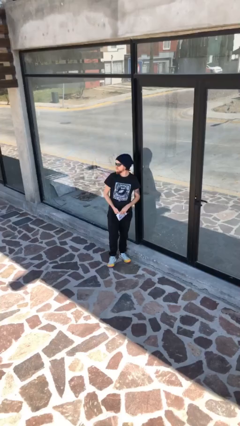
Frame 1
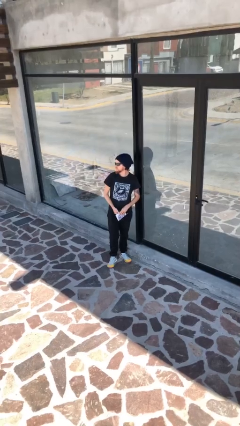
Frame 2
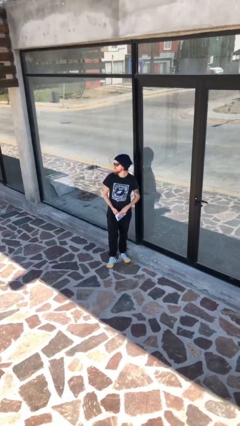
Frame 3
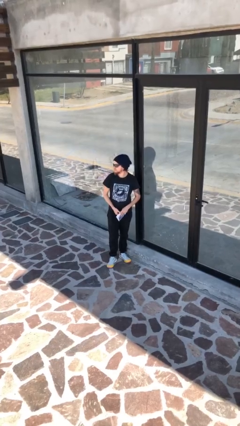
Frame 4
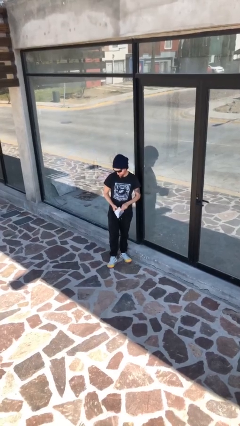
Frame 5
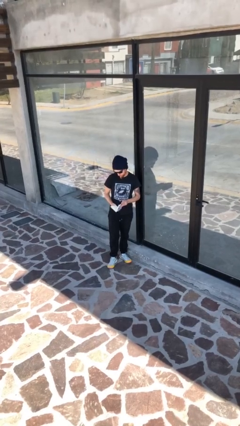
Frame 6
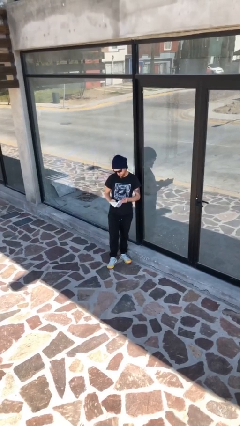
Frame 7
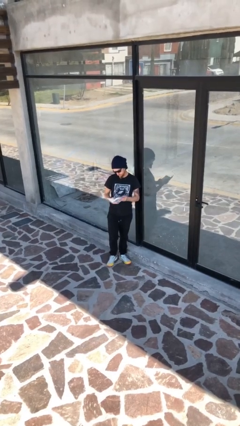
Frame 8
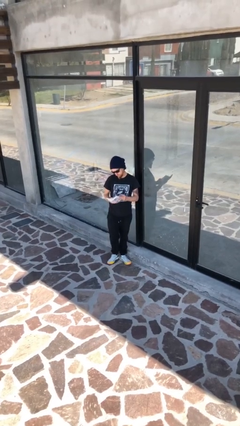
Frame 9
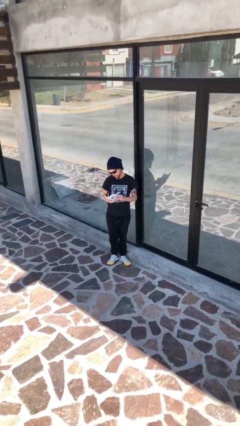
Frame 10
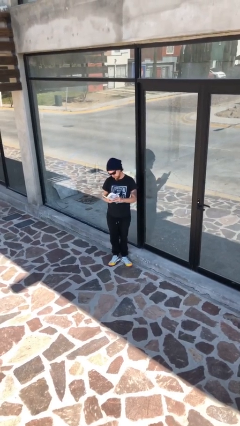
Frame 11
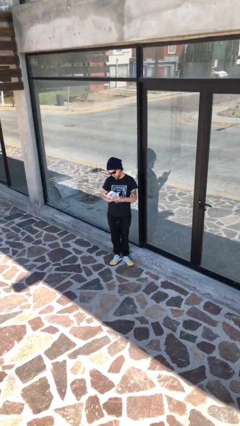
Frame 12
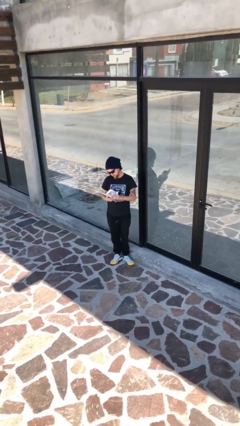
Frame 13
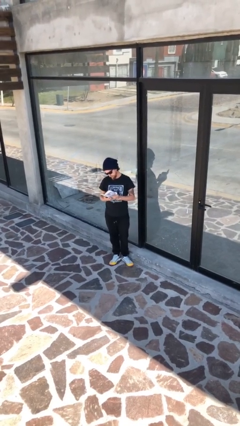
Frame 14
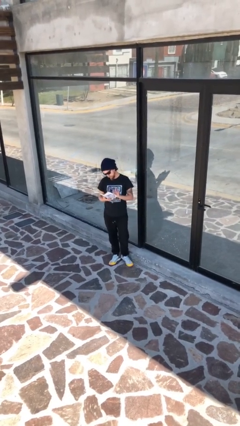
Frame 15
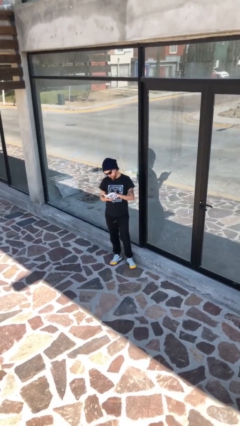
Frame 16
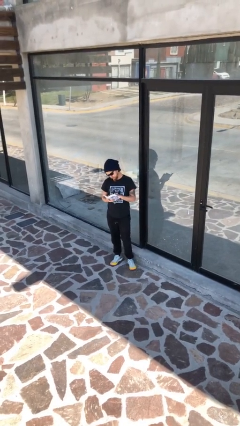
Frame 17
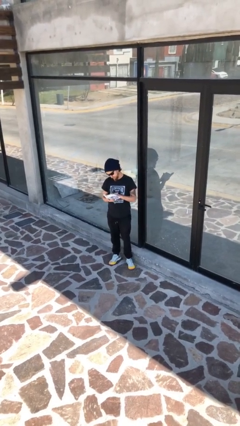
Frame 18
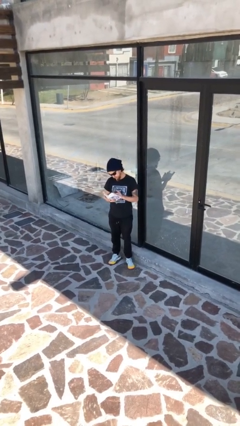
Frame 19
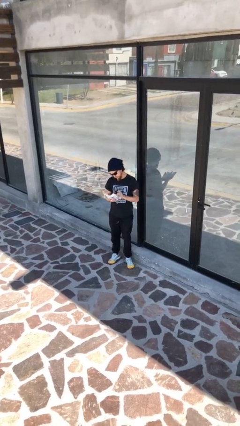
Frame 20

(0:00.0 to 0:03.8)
person reads document

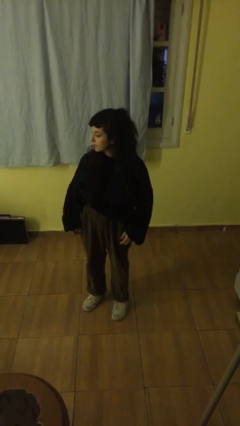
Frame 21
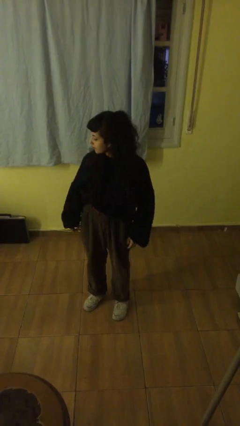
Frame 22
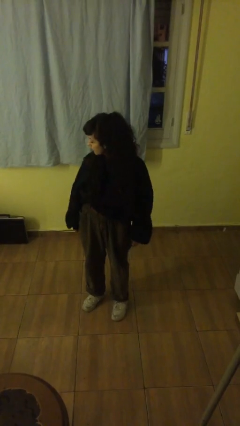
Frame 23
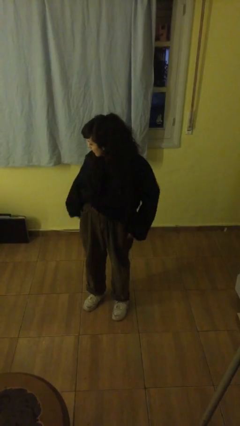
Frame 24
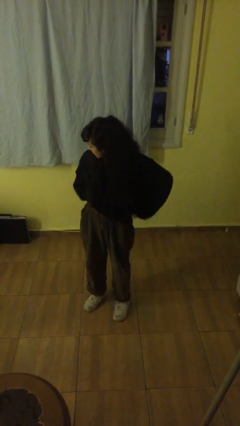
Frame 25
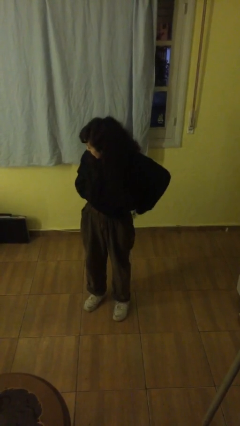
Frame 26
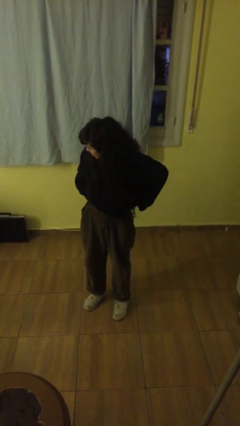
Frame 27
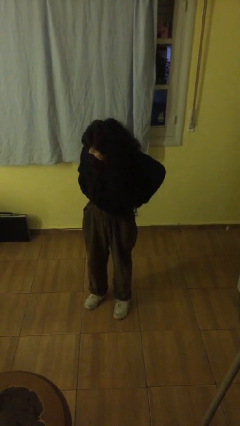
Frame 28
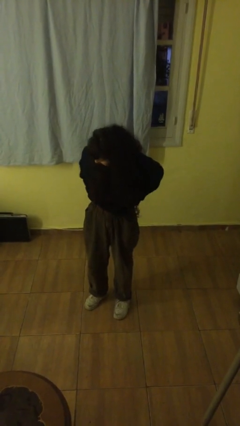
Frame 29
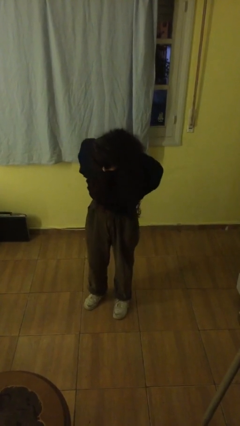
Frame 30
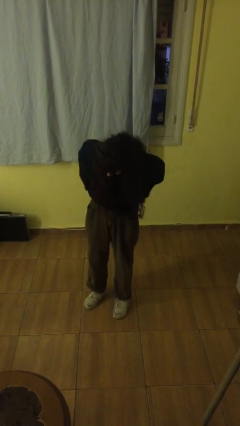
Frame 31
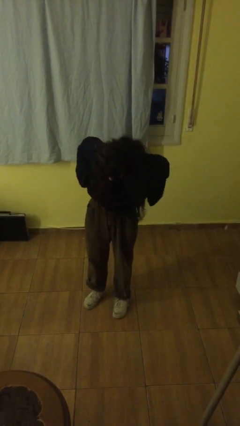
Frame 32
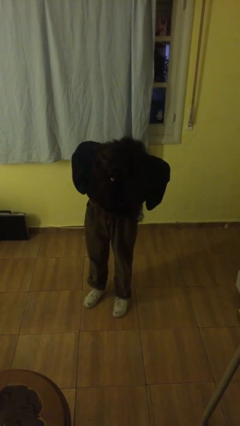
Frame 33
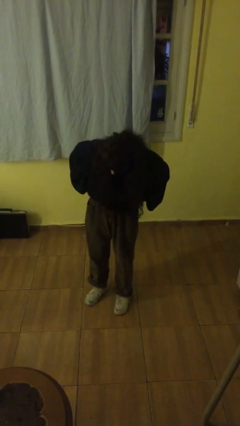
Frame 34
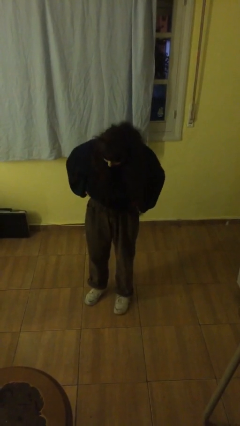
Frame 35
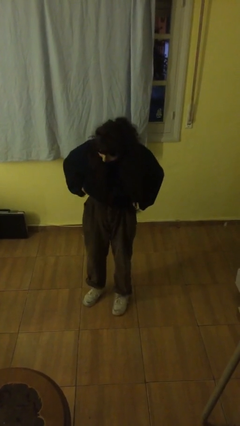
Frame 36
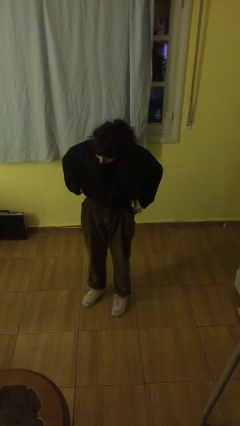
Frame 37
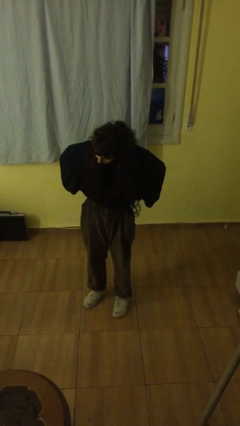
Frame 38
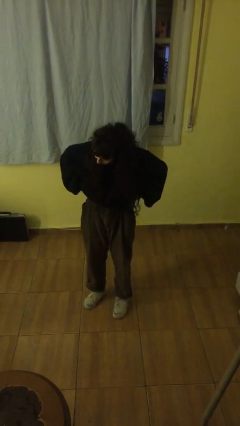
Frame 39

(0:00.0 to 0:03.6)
person hikes up pants

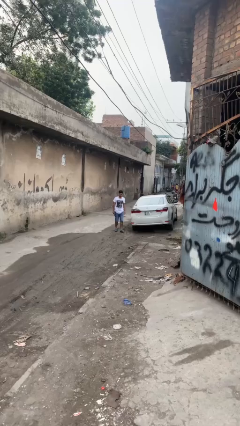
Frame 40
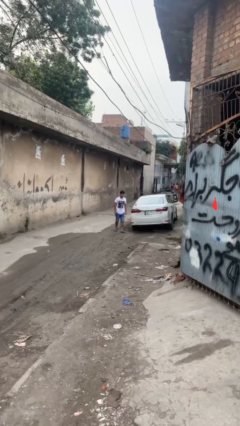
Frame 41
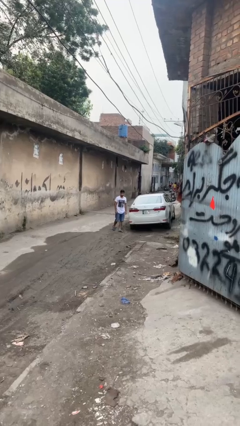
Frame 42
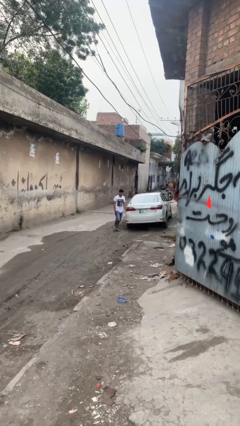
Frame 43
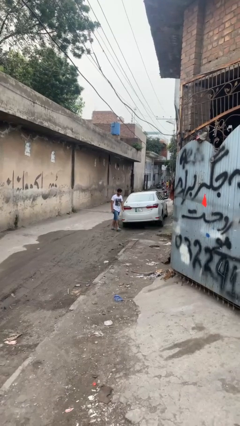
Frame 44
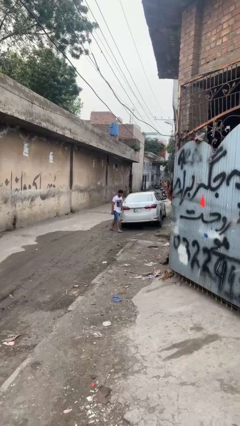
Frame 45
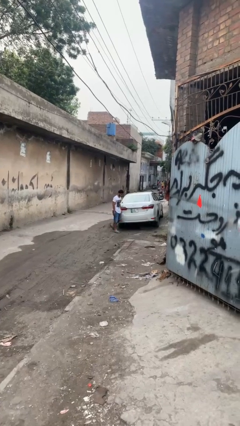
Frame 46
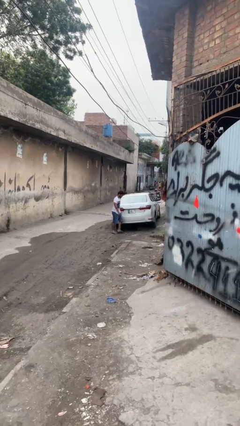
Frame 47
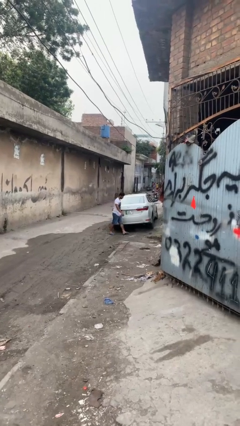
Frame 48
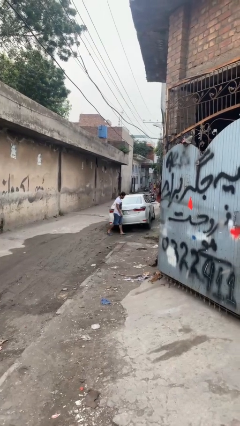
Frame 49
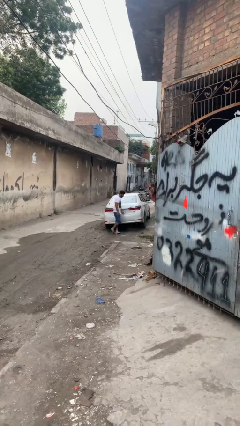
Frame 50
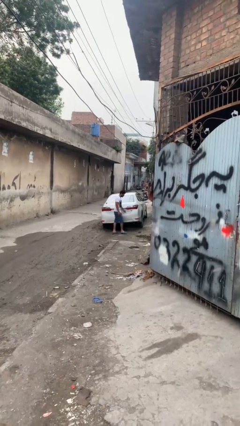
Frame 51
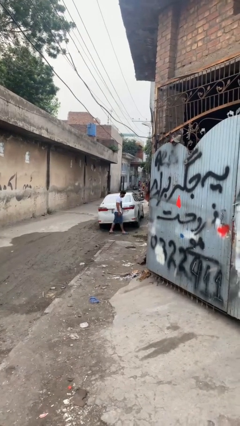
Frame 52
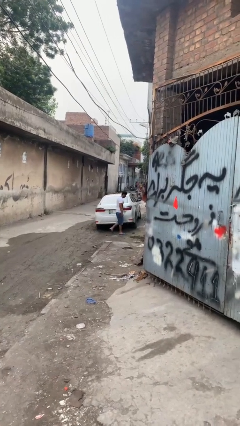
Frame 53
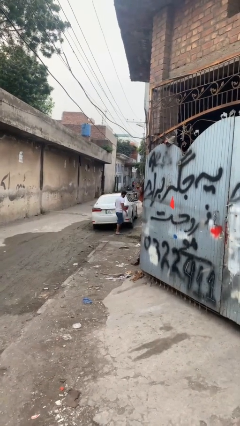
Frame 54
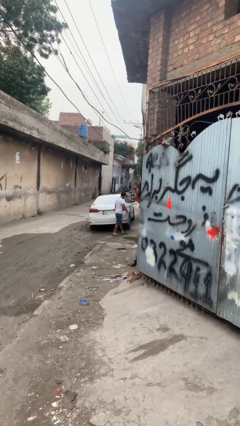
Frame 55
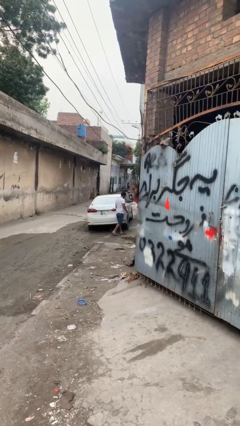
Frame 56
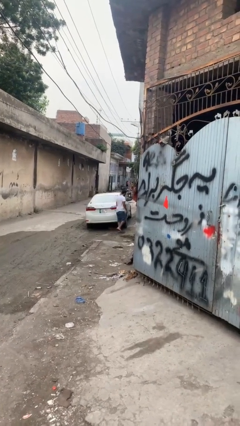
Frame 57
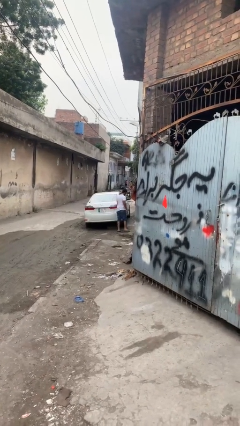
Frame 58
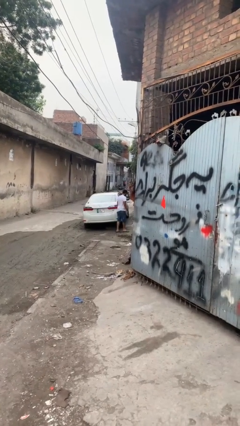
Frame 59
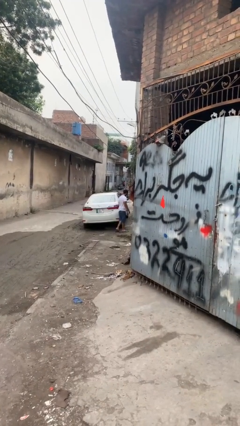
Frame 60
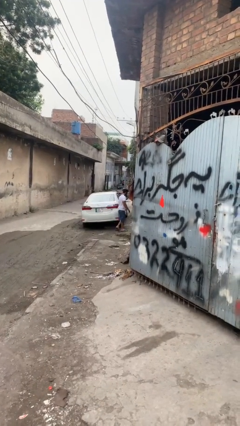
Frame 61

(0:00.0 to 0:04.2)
person walks around car

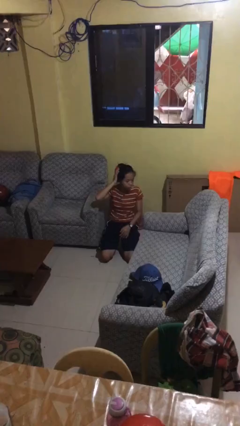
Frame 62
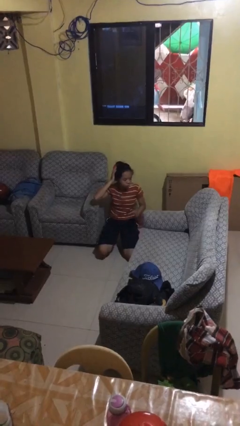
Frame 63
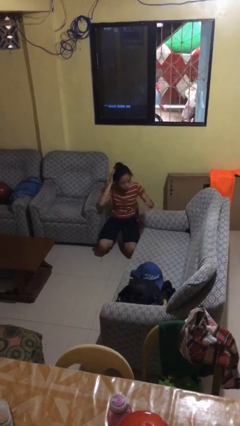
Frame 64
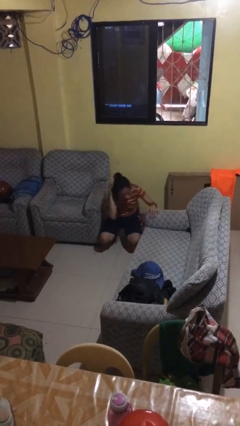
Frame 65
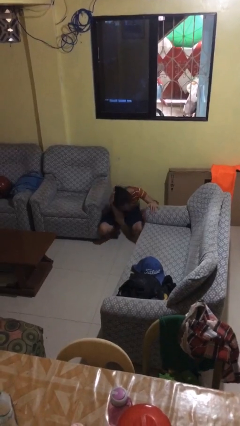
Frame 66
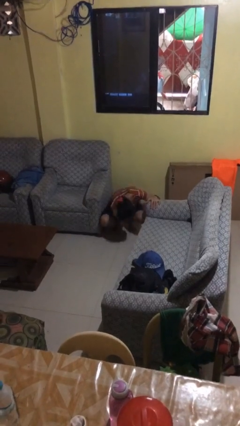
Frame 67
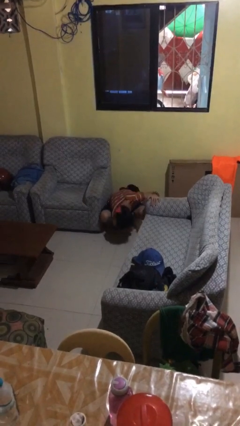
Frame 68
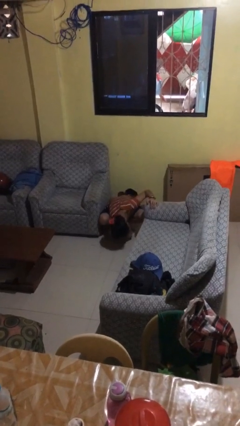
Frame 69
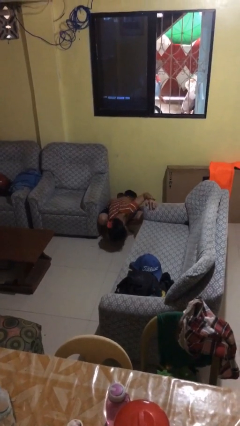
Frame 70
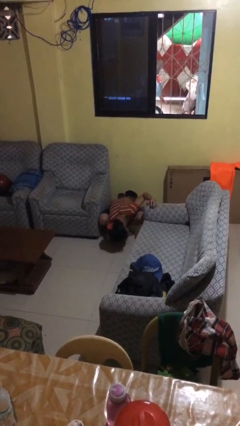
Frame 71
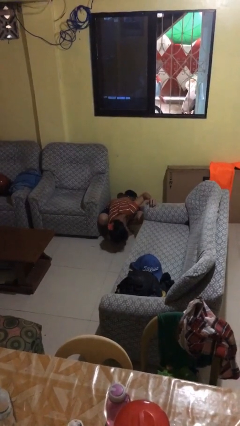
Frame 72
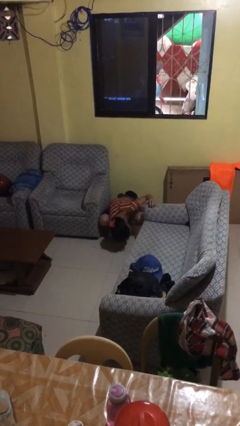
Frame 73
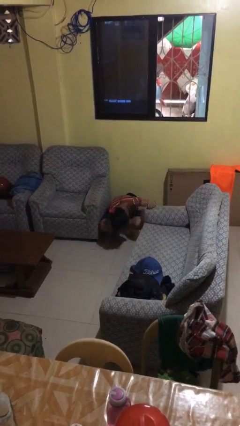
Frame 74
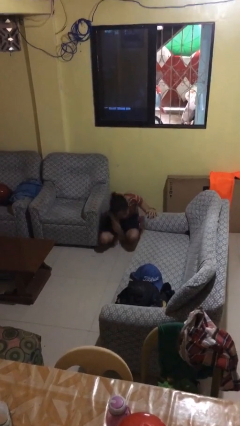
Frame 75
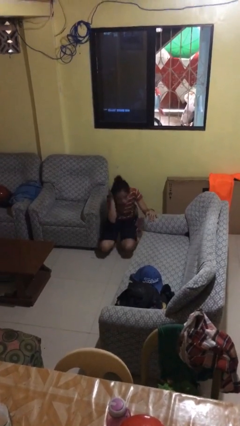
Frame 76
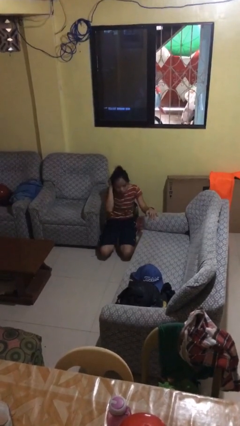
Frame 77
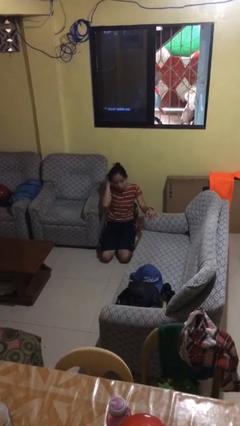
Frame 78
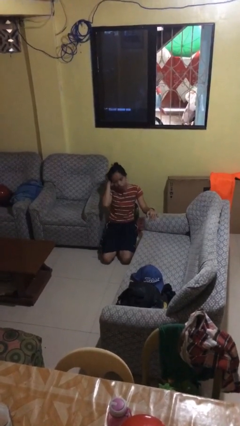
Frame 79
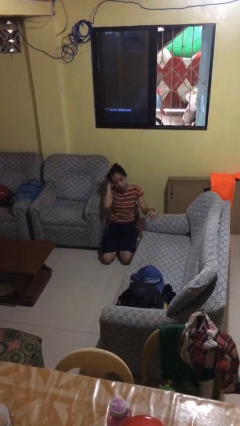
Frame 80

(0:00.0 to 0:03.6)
person searches under couch

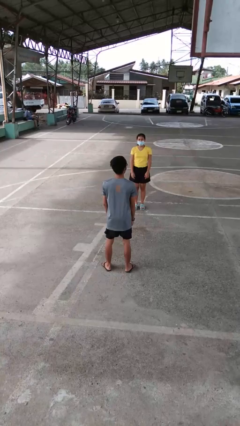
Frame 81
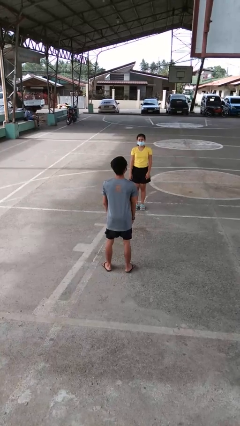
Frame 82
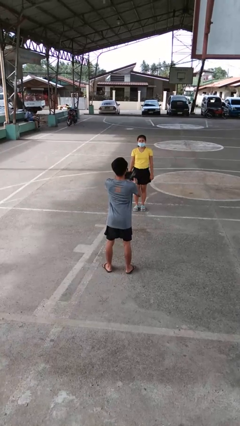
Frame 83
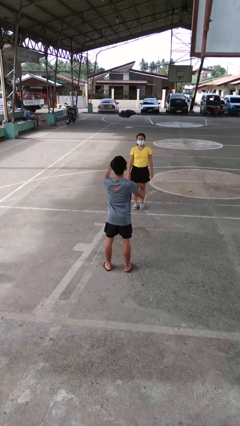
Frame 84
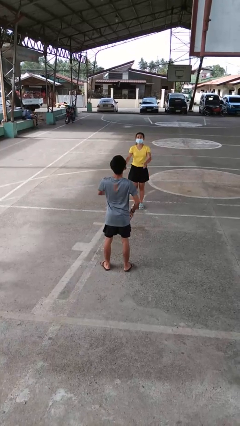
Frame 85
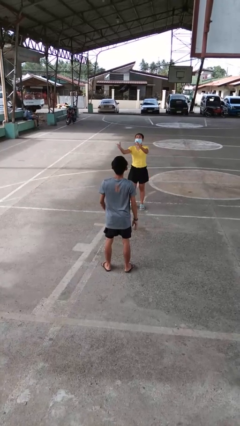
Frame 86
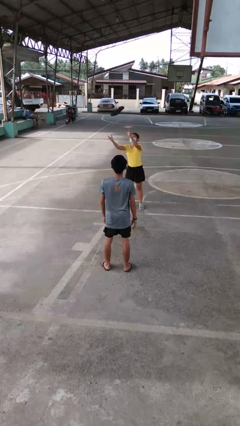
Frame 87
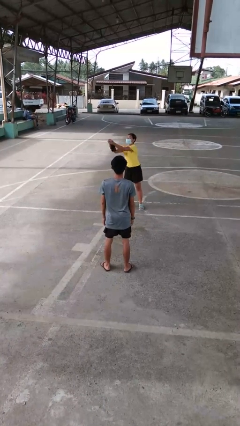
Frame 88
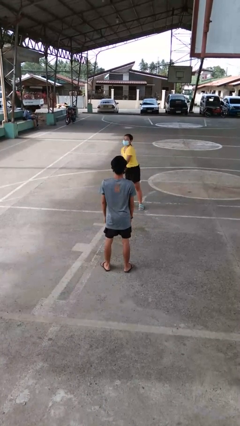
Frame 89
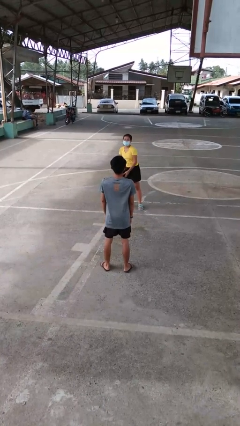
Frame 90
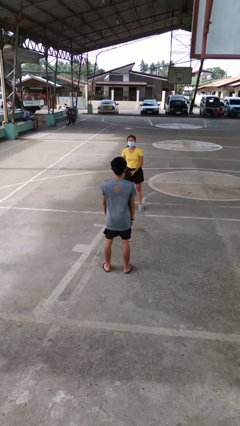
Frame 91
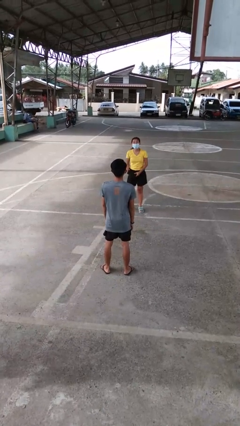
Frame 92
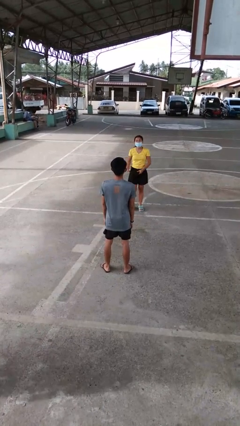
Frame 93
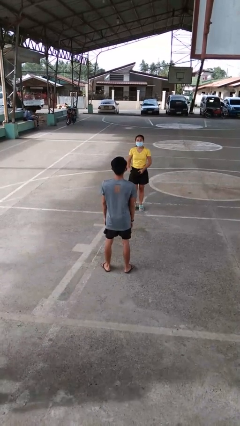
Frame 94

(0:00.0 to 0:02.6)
person throws object to person
